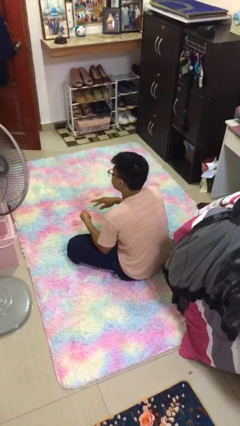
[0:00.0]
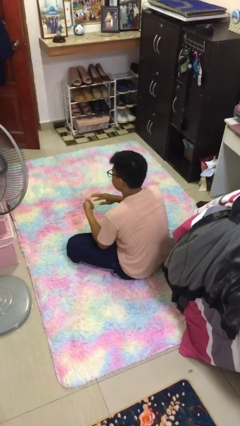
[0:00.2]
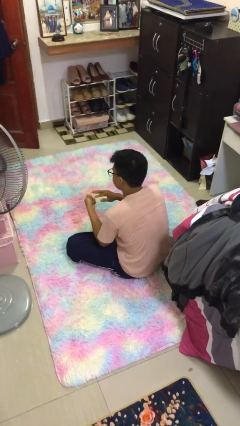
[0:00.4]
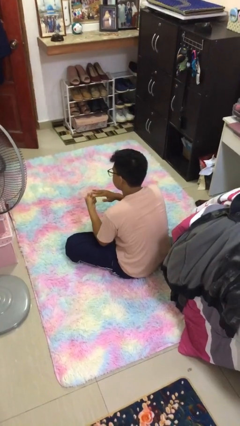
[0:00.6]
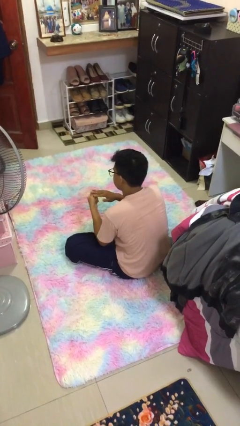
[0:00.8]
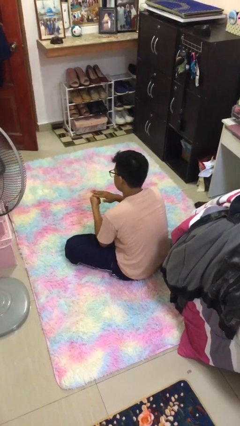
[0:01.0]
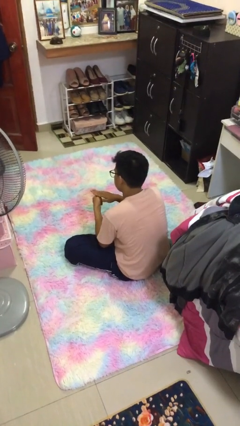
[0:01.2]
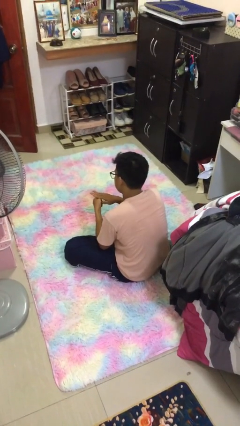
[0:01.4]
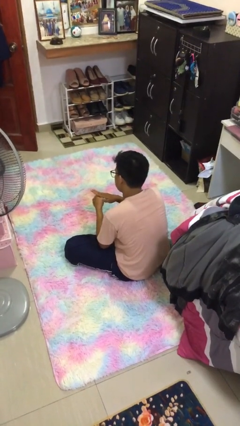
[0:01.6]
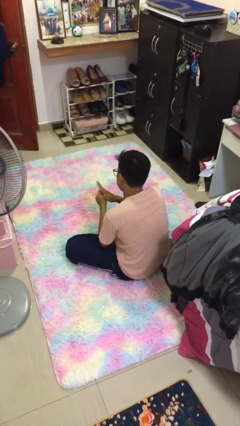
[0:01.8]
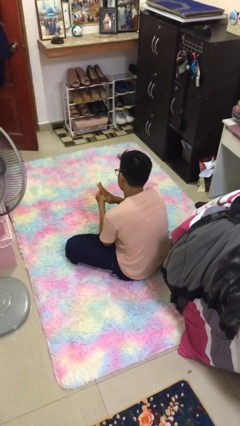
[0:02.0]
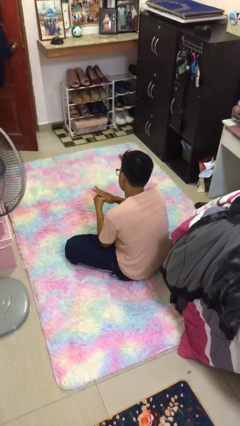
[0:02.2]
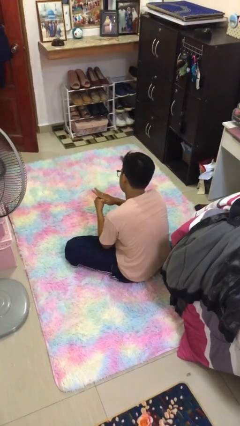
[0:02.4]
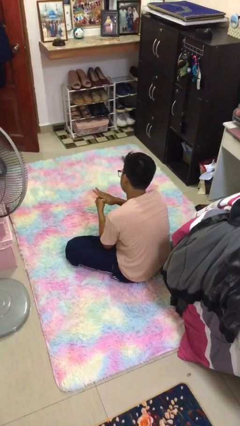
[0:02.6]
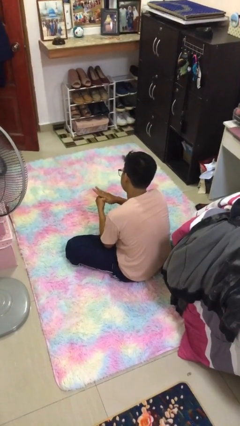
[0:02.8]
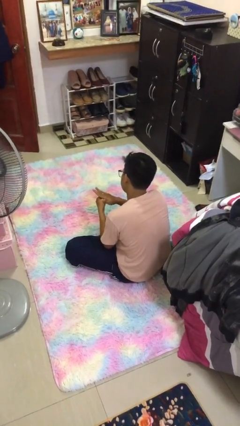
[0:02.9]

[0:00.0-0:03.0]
person puts on ring

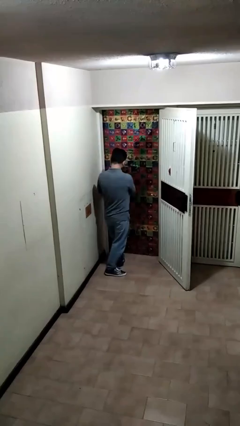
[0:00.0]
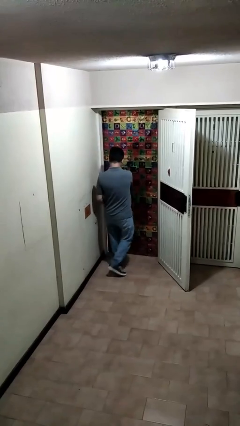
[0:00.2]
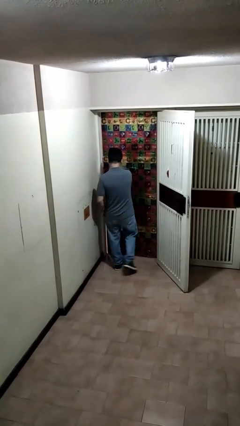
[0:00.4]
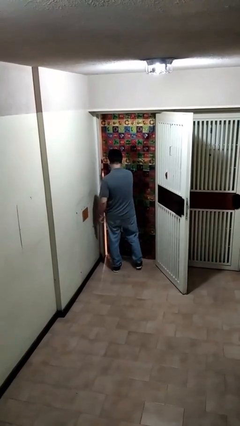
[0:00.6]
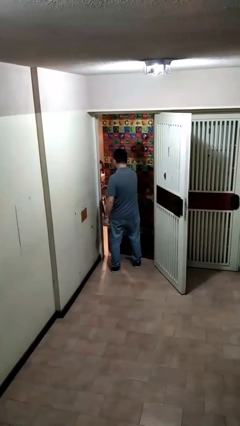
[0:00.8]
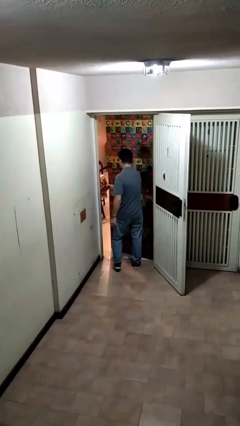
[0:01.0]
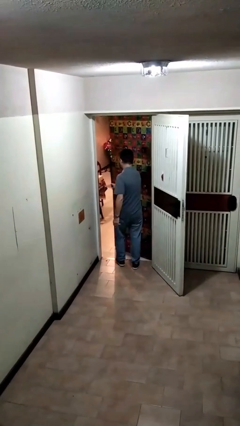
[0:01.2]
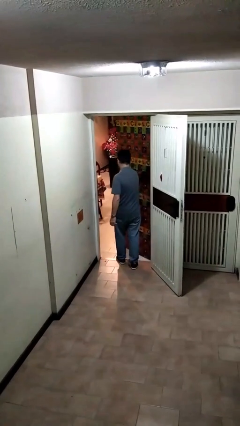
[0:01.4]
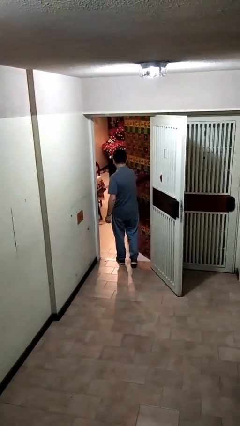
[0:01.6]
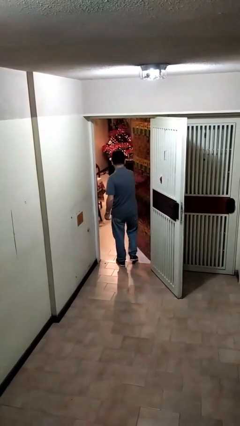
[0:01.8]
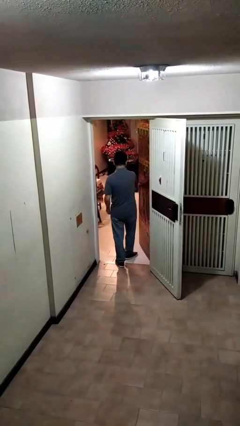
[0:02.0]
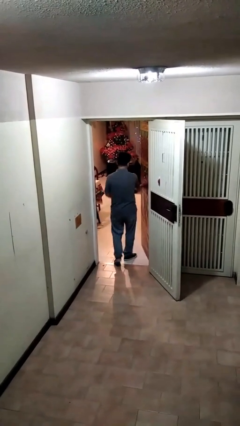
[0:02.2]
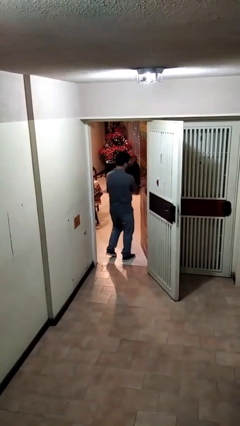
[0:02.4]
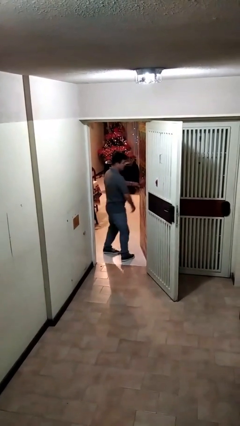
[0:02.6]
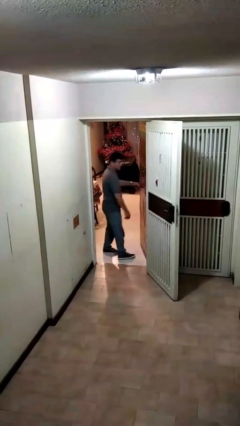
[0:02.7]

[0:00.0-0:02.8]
person opens facility door

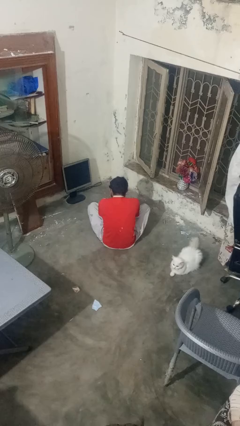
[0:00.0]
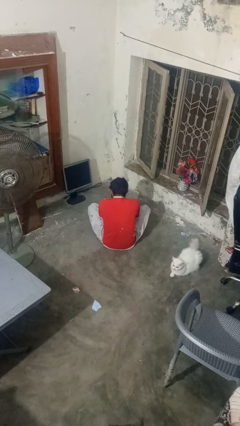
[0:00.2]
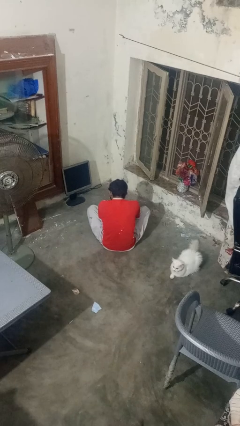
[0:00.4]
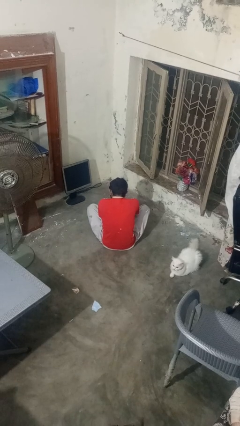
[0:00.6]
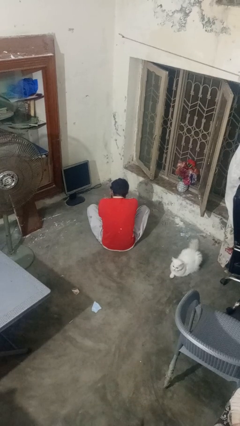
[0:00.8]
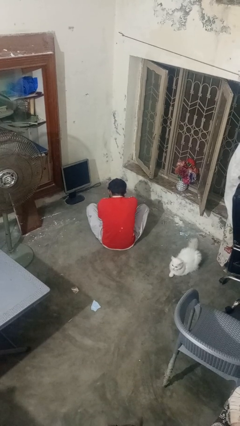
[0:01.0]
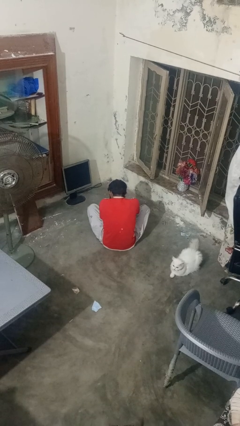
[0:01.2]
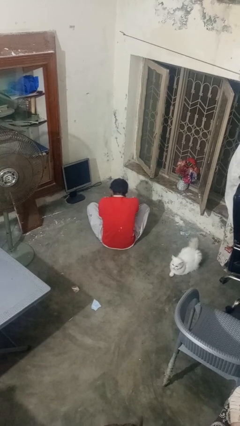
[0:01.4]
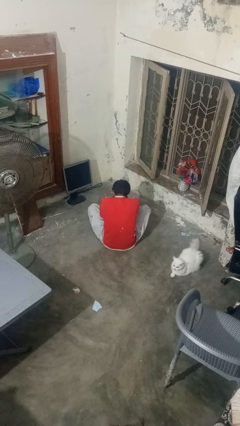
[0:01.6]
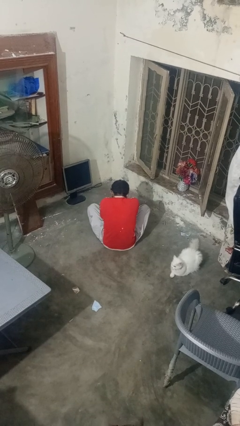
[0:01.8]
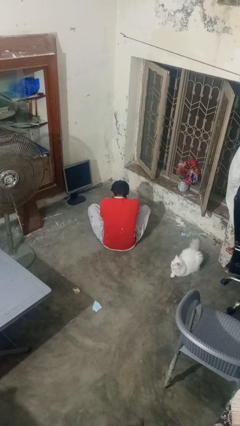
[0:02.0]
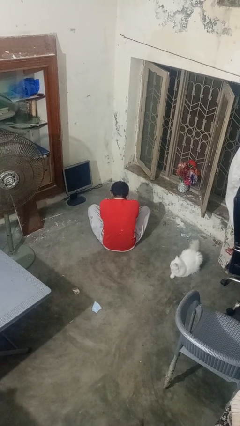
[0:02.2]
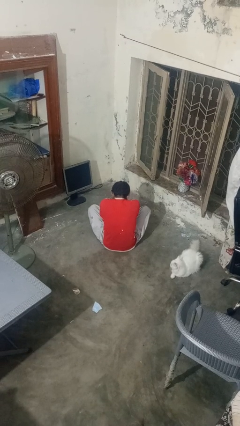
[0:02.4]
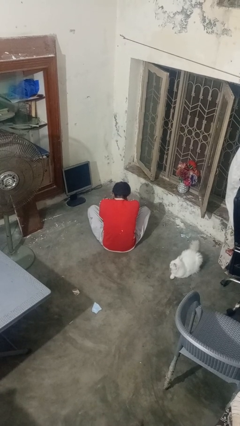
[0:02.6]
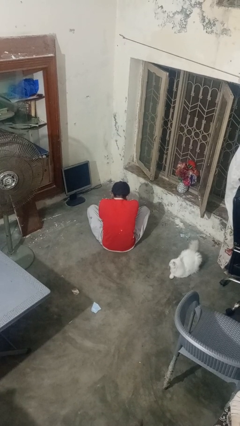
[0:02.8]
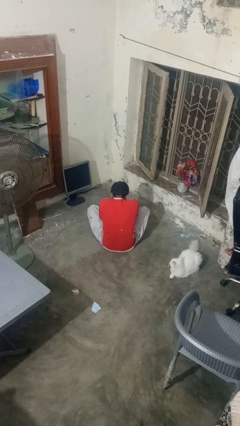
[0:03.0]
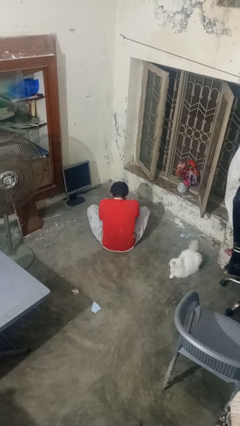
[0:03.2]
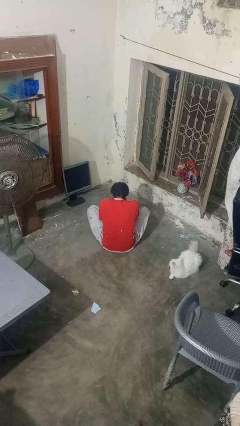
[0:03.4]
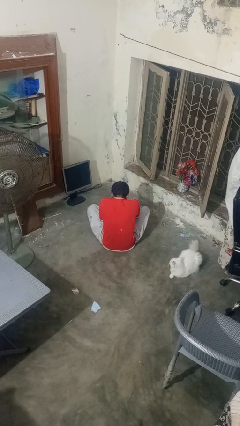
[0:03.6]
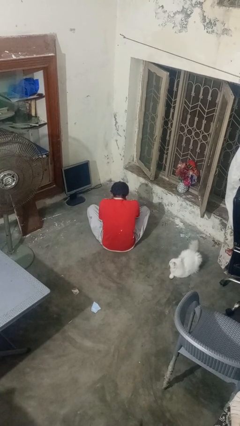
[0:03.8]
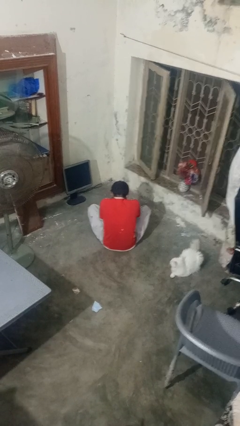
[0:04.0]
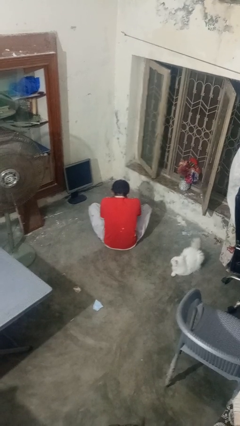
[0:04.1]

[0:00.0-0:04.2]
person swats bug

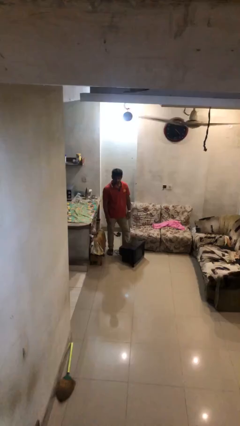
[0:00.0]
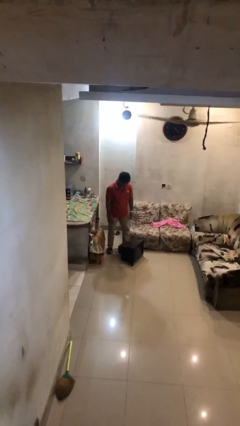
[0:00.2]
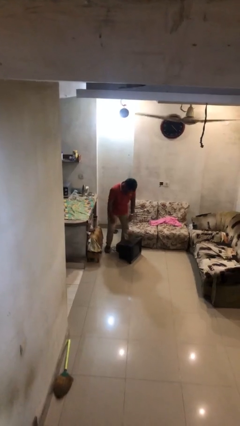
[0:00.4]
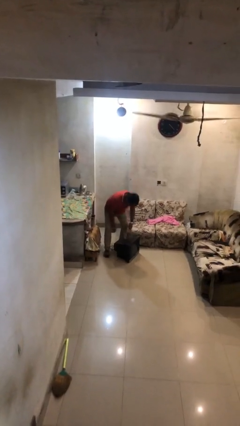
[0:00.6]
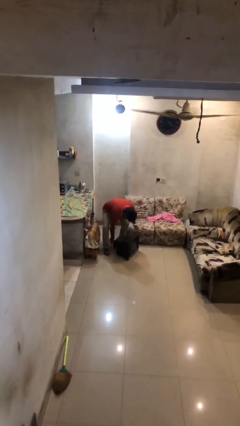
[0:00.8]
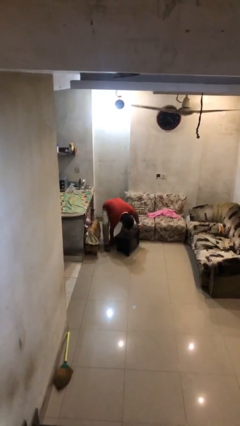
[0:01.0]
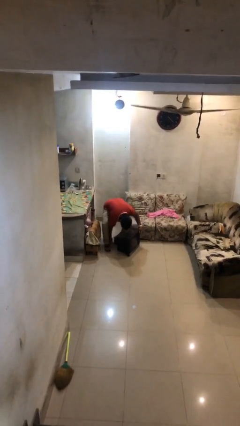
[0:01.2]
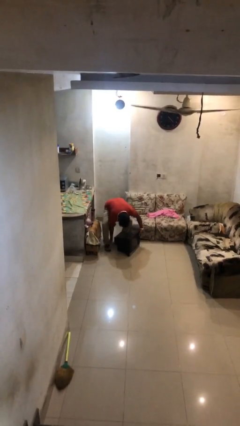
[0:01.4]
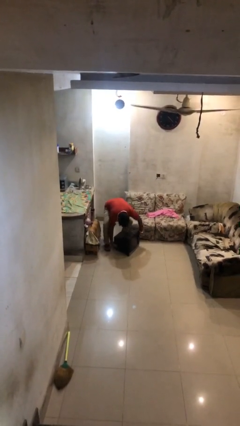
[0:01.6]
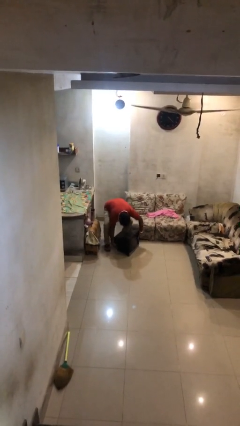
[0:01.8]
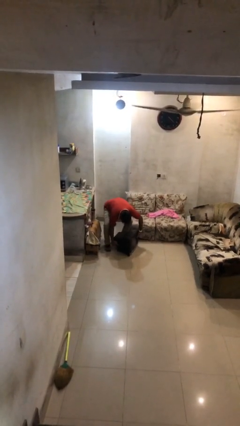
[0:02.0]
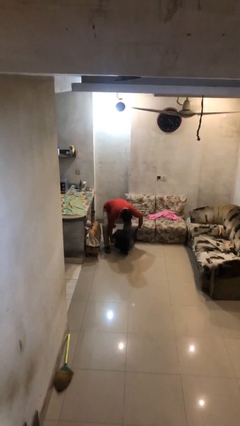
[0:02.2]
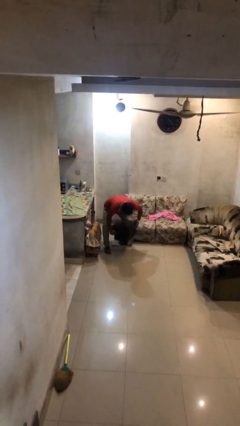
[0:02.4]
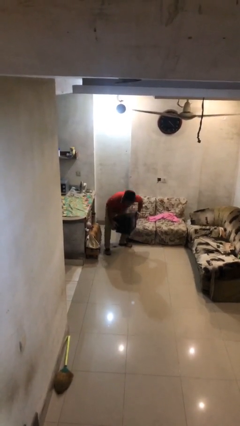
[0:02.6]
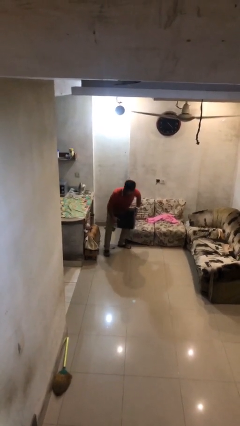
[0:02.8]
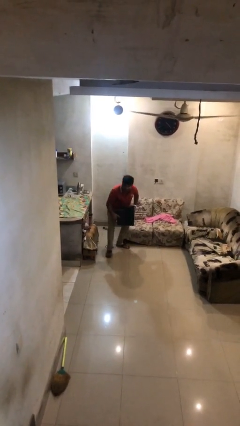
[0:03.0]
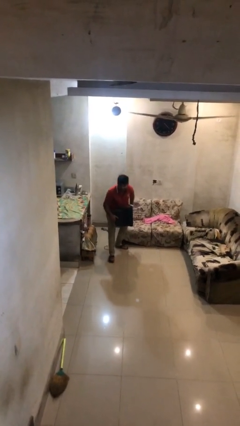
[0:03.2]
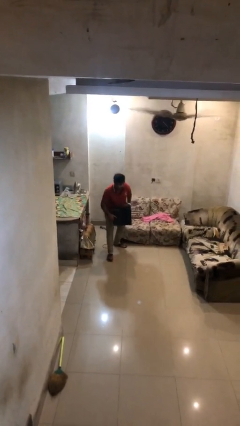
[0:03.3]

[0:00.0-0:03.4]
person picks up object from floor

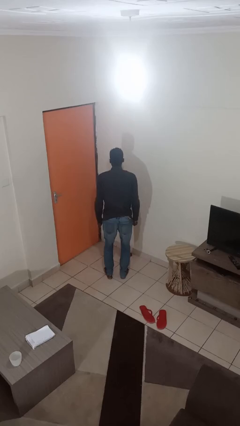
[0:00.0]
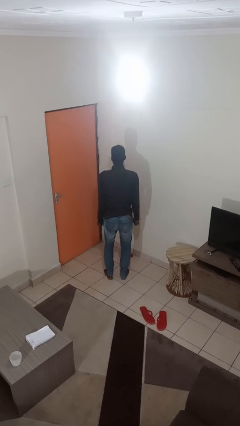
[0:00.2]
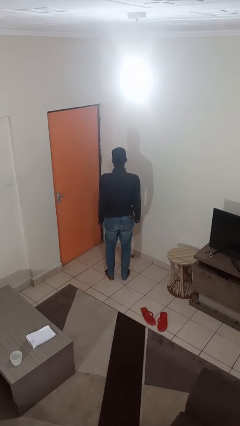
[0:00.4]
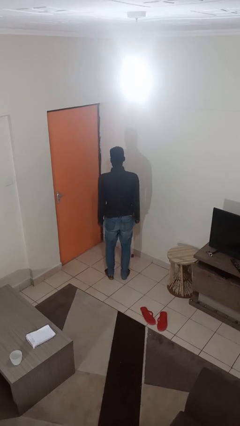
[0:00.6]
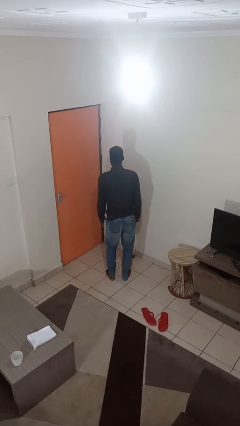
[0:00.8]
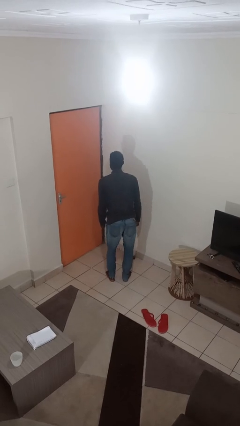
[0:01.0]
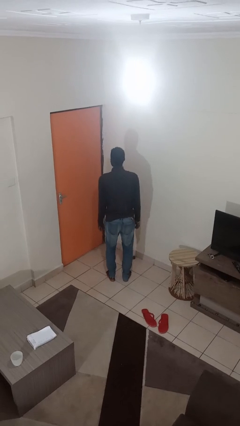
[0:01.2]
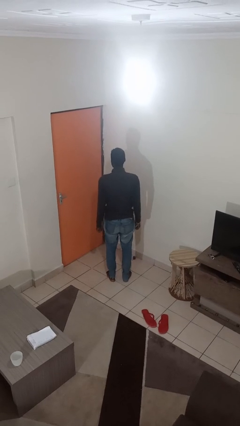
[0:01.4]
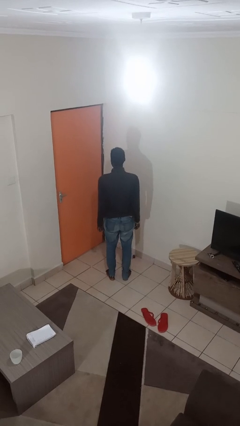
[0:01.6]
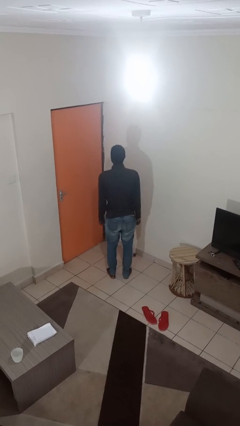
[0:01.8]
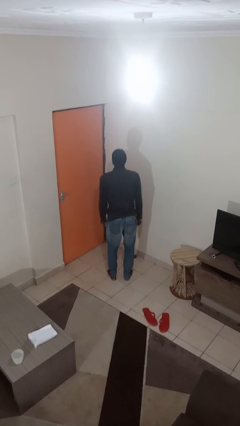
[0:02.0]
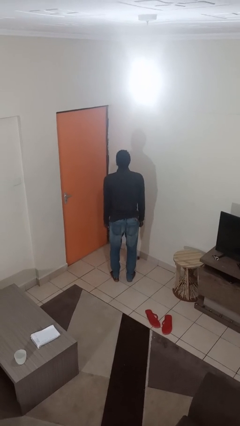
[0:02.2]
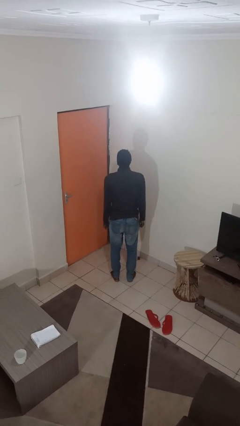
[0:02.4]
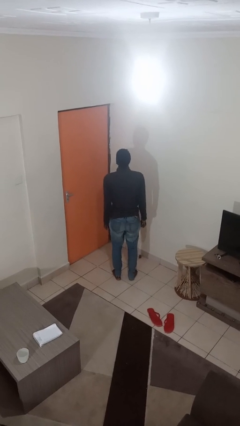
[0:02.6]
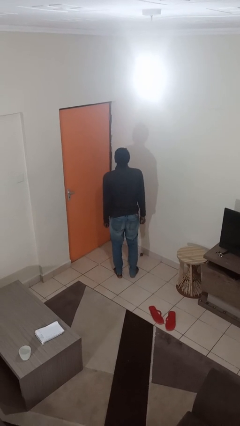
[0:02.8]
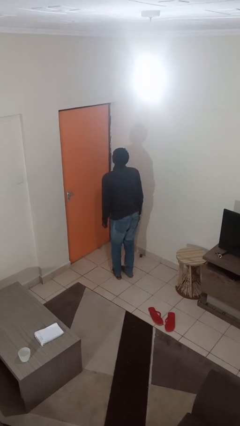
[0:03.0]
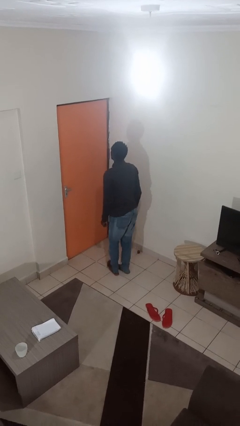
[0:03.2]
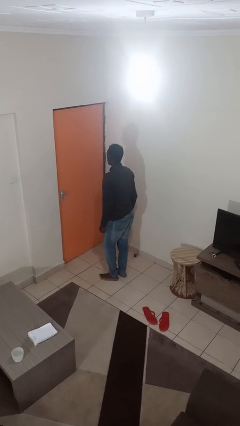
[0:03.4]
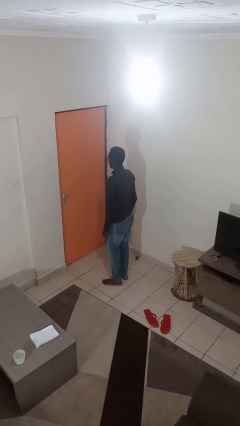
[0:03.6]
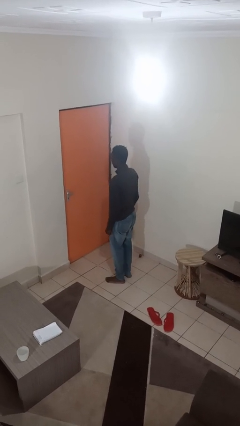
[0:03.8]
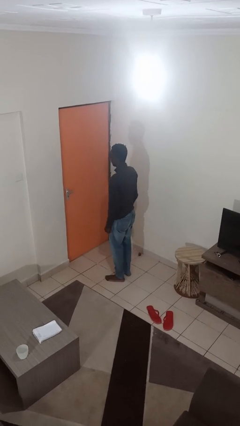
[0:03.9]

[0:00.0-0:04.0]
person wiggles hips
